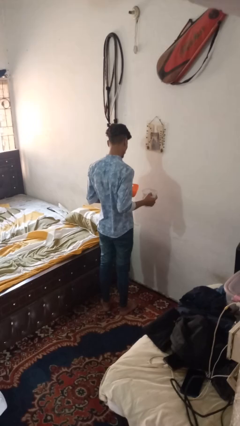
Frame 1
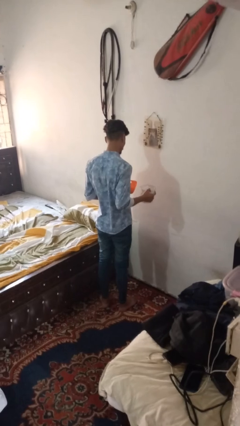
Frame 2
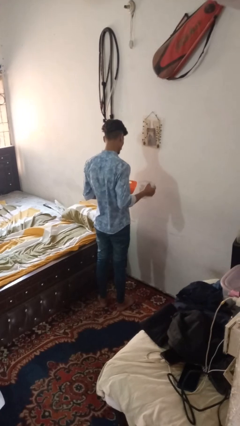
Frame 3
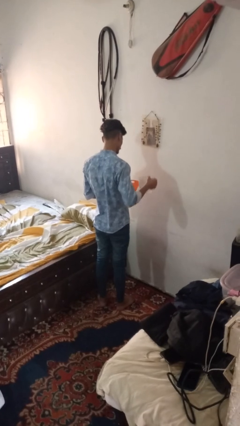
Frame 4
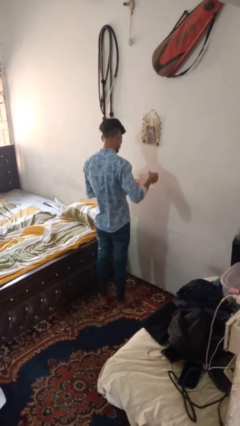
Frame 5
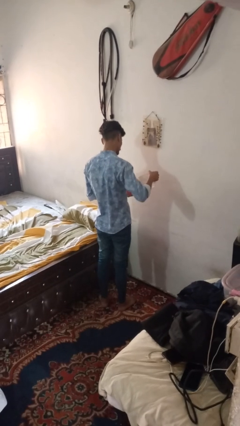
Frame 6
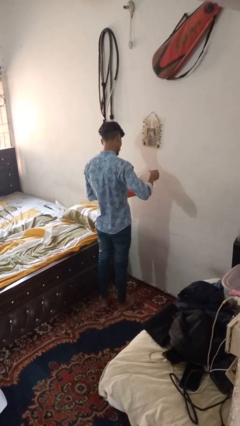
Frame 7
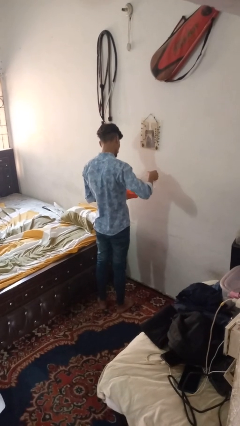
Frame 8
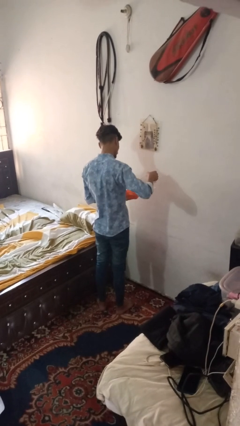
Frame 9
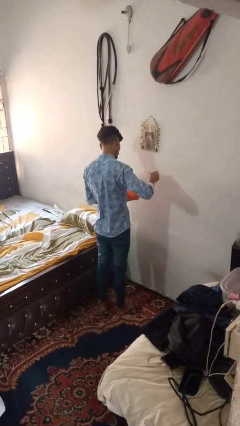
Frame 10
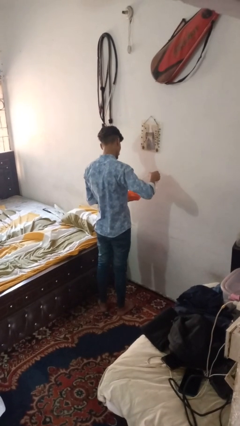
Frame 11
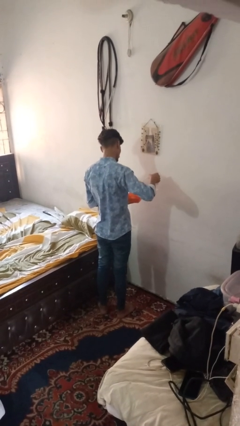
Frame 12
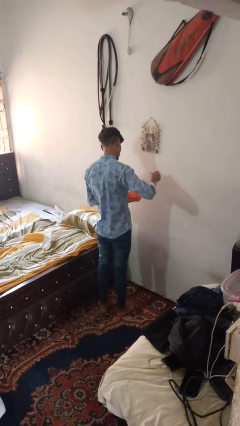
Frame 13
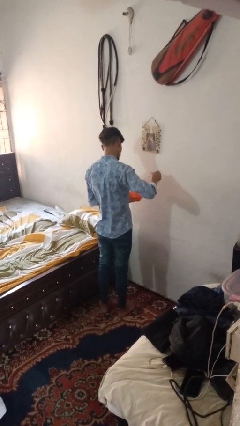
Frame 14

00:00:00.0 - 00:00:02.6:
person pours into bowl

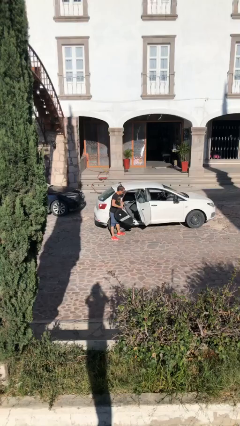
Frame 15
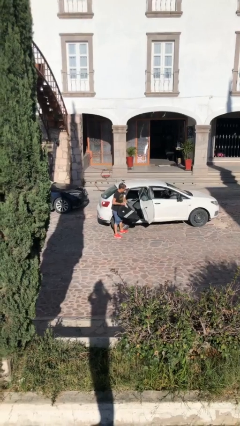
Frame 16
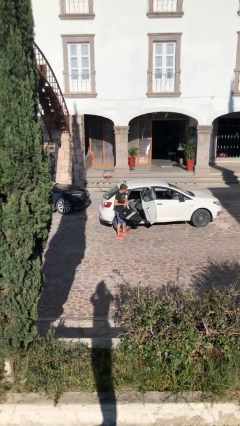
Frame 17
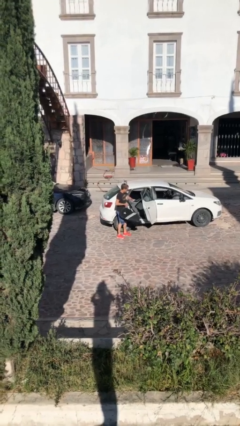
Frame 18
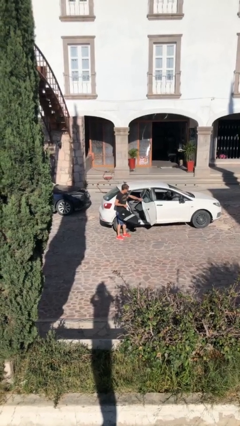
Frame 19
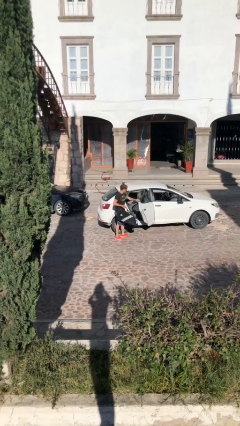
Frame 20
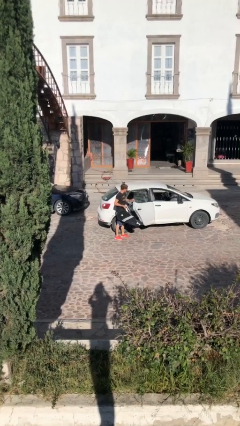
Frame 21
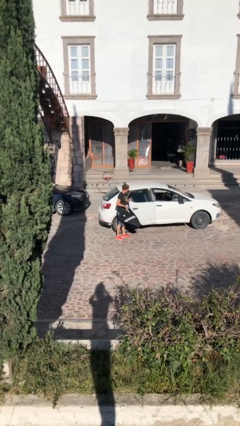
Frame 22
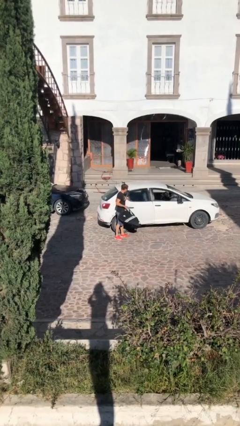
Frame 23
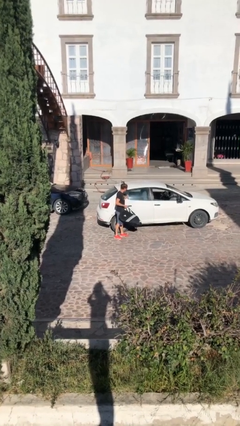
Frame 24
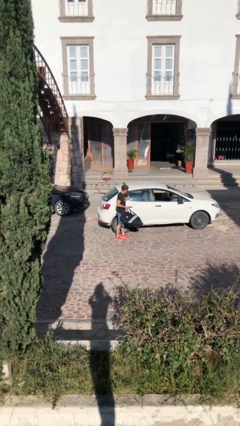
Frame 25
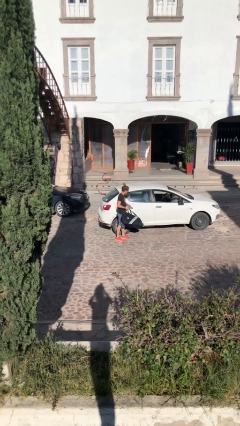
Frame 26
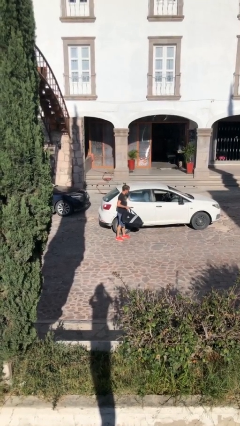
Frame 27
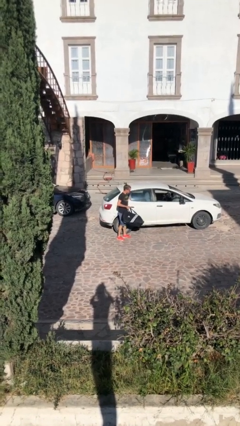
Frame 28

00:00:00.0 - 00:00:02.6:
person closes car door

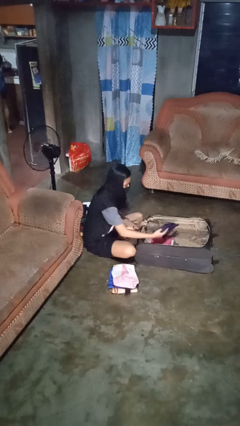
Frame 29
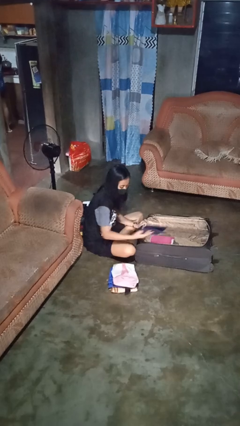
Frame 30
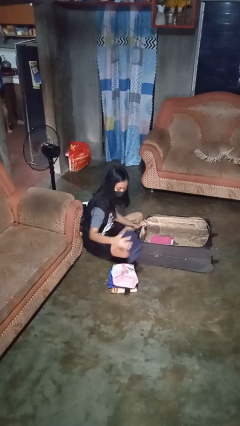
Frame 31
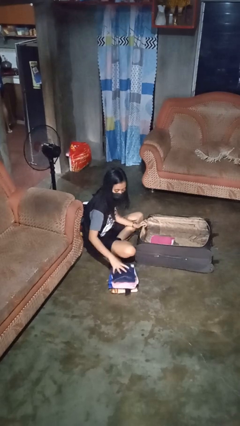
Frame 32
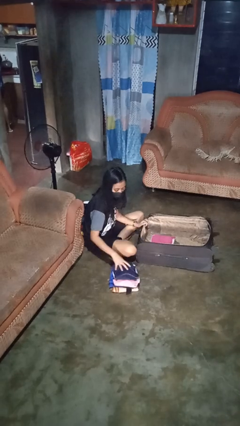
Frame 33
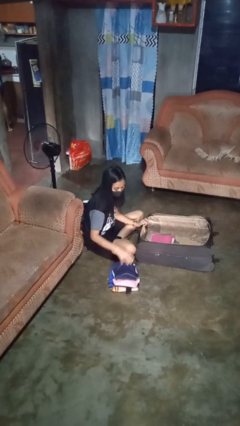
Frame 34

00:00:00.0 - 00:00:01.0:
person unloads clothes from suitcase

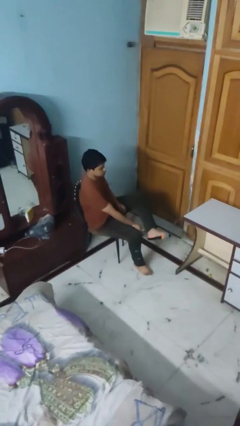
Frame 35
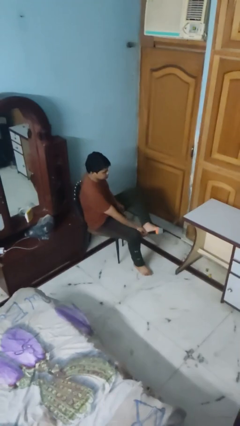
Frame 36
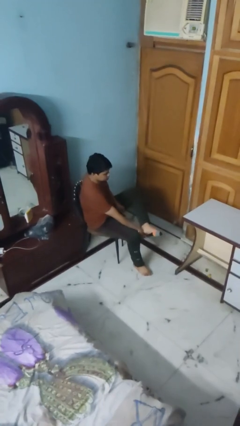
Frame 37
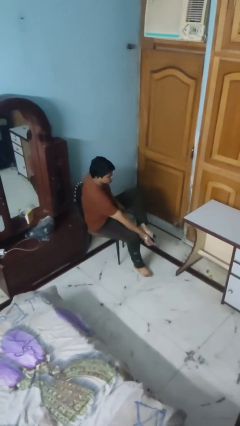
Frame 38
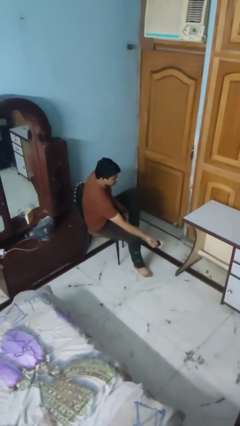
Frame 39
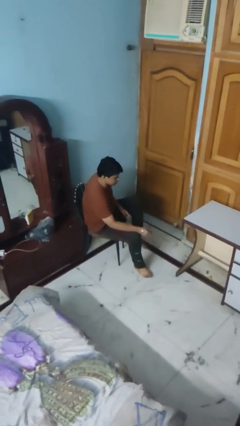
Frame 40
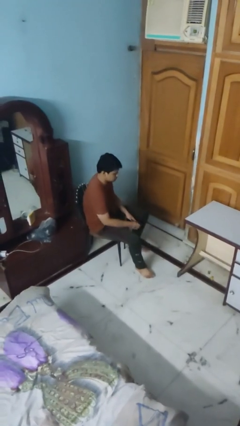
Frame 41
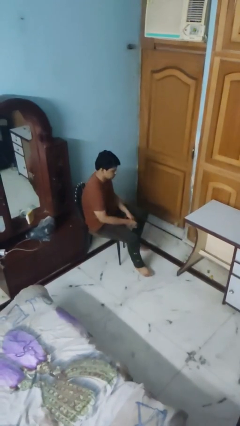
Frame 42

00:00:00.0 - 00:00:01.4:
person takes off socks

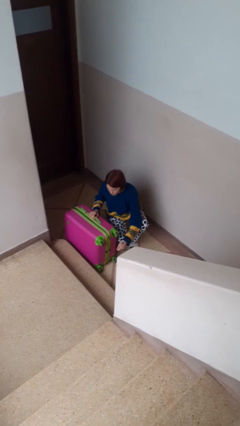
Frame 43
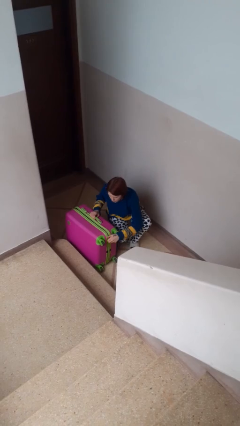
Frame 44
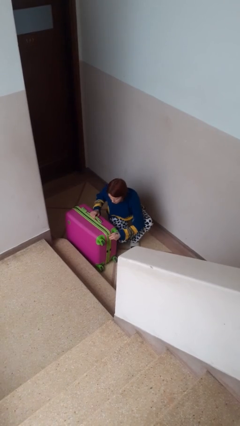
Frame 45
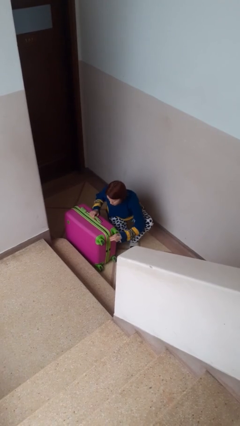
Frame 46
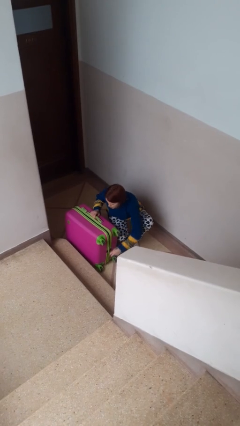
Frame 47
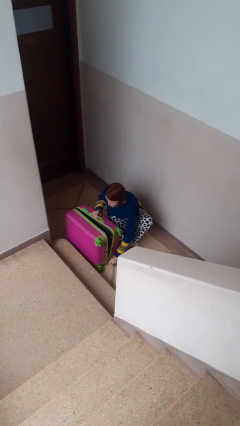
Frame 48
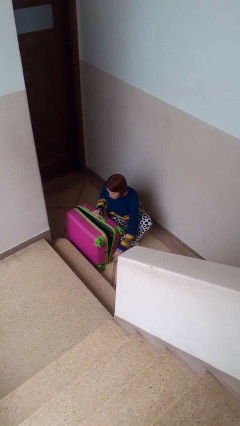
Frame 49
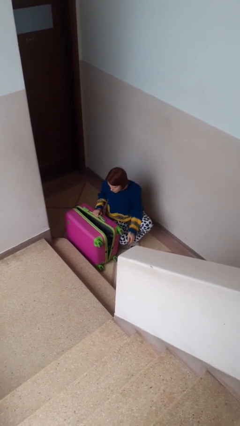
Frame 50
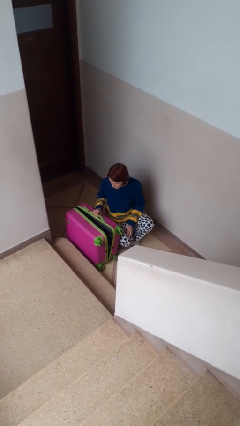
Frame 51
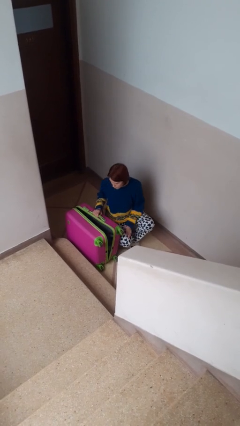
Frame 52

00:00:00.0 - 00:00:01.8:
person opens suitcase

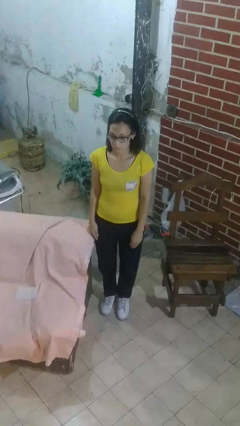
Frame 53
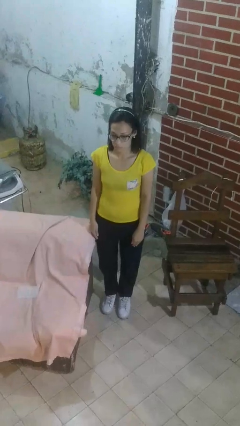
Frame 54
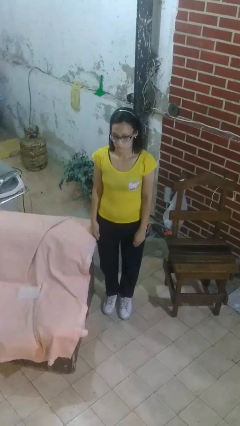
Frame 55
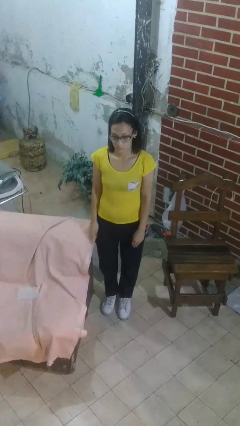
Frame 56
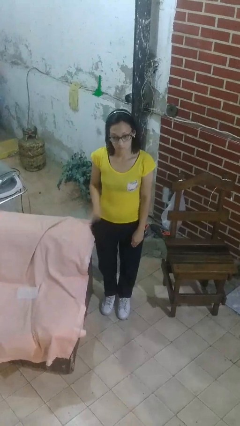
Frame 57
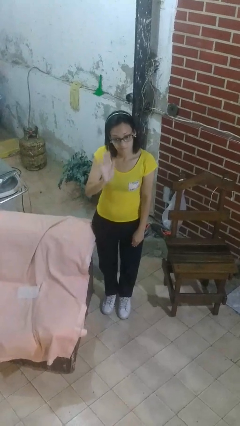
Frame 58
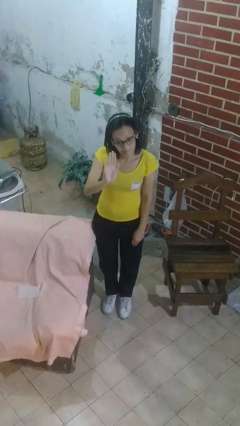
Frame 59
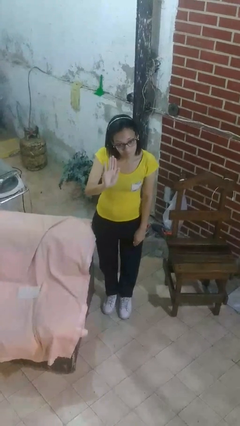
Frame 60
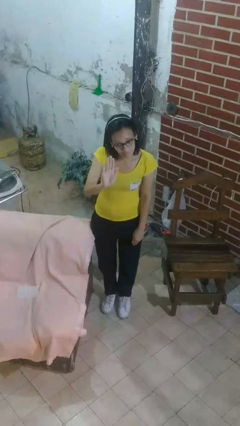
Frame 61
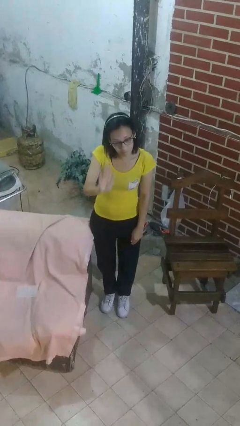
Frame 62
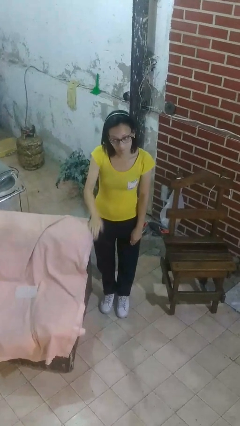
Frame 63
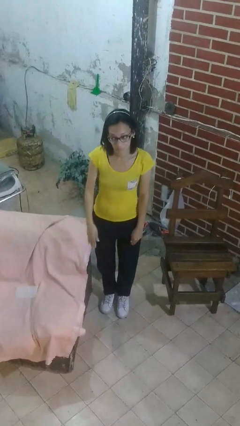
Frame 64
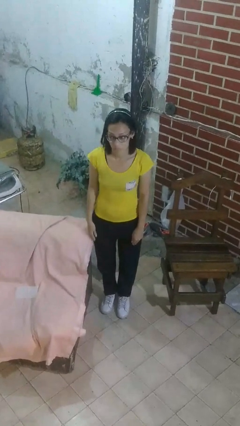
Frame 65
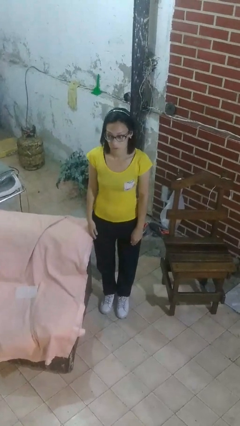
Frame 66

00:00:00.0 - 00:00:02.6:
person gestures stop

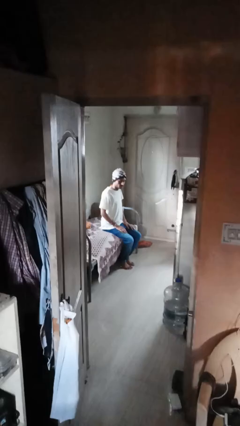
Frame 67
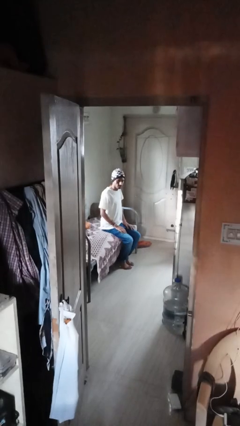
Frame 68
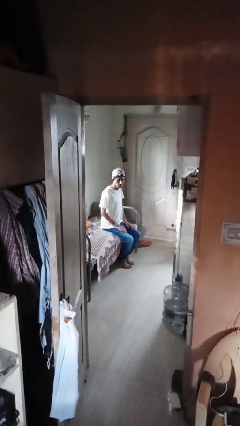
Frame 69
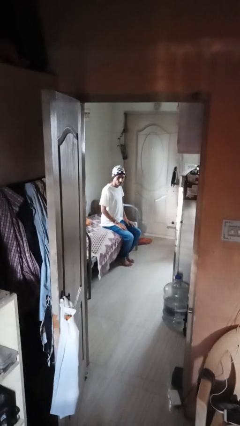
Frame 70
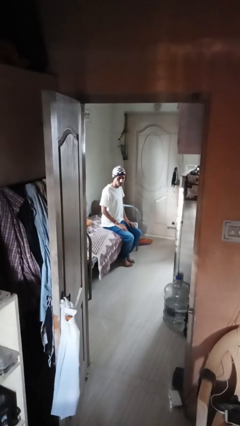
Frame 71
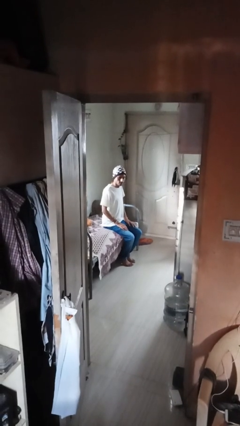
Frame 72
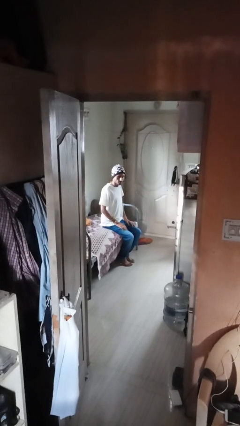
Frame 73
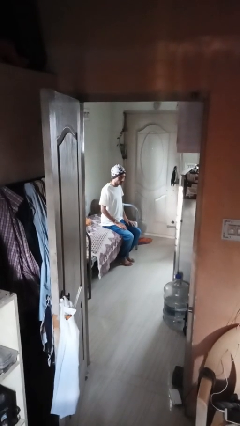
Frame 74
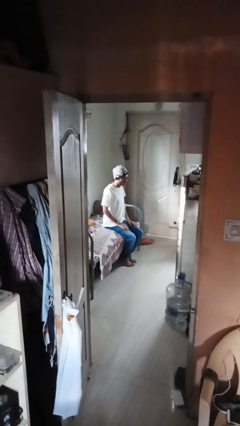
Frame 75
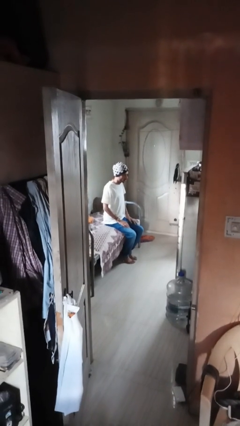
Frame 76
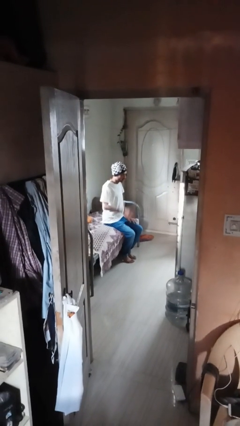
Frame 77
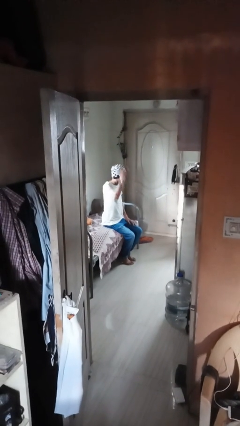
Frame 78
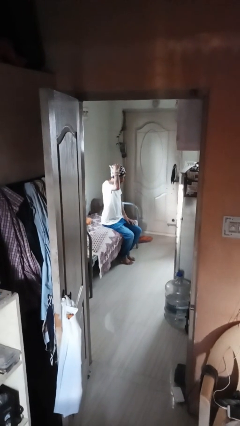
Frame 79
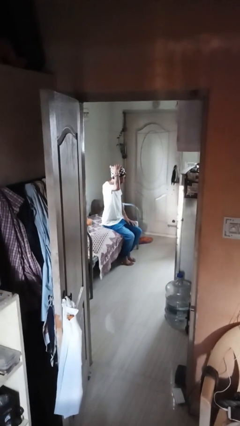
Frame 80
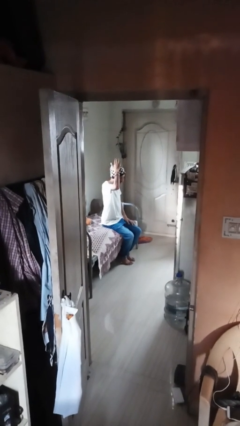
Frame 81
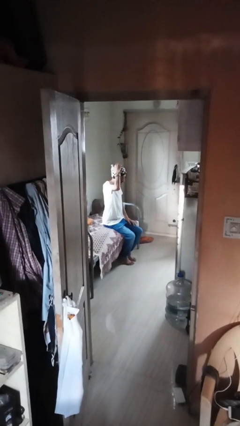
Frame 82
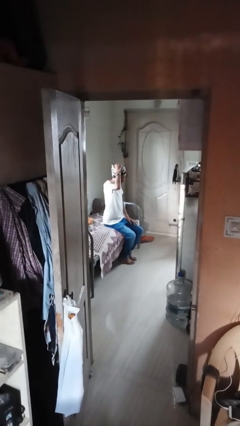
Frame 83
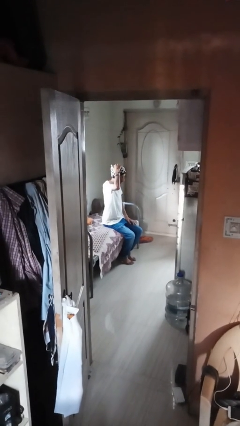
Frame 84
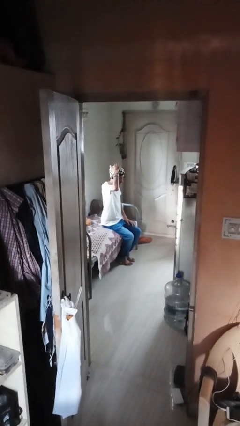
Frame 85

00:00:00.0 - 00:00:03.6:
person pats head

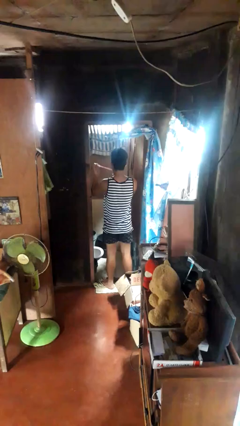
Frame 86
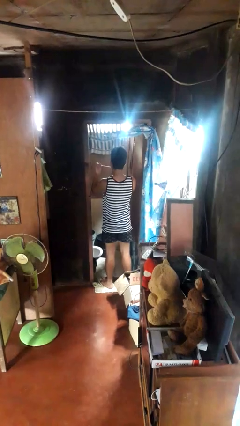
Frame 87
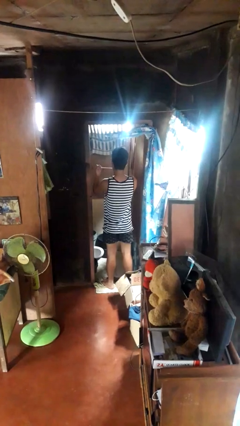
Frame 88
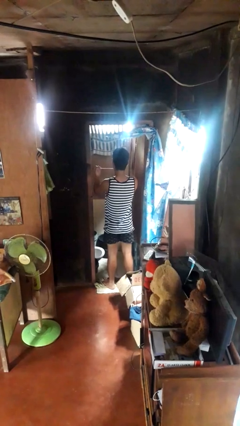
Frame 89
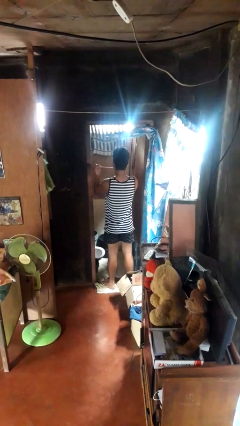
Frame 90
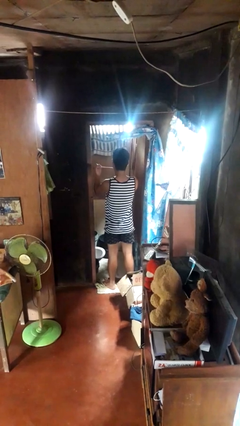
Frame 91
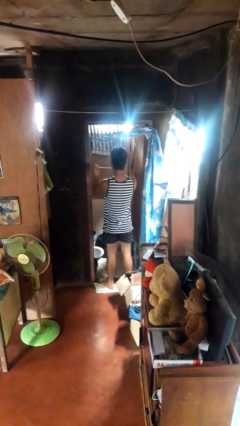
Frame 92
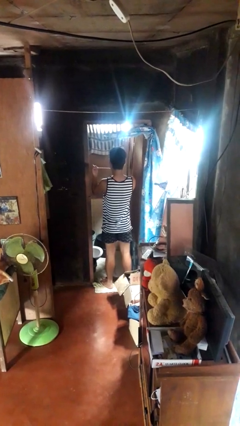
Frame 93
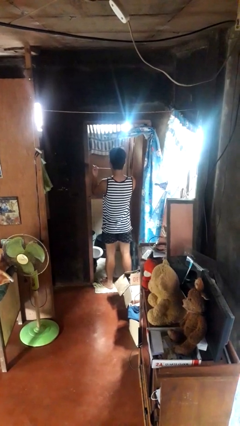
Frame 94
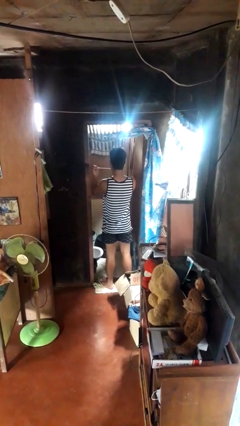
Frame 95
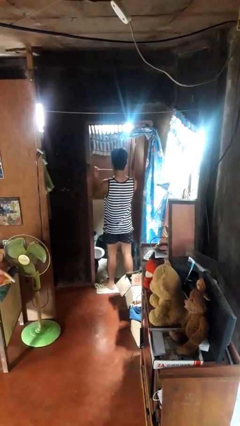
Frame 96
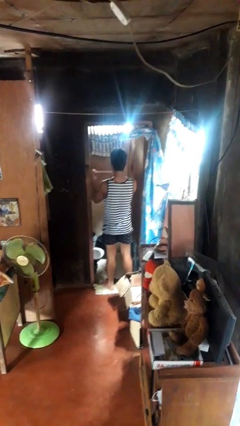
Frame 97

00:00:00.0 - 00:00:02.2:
person flosses
